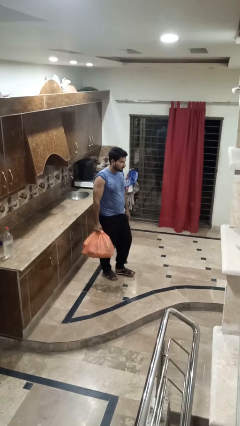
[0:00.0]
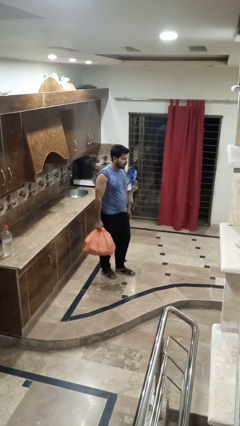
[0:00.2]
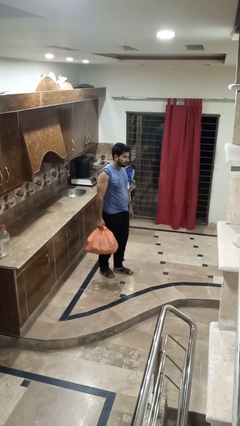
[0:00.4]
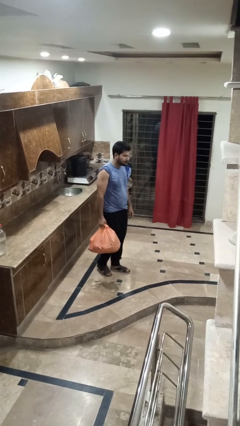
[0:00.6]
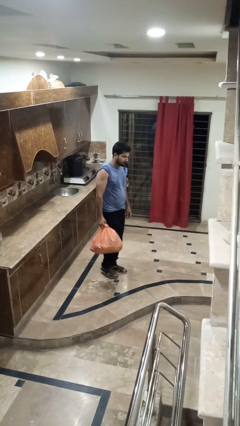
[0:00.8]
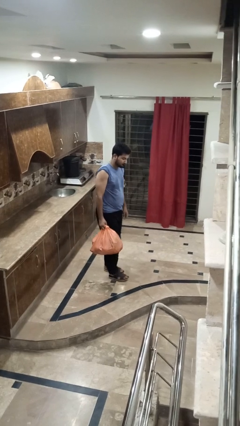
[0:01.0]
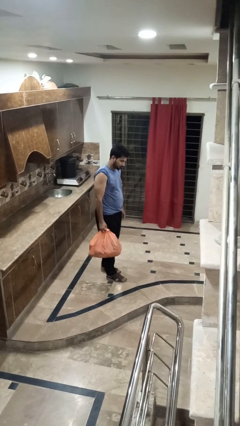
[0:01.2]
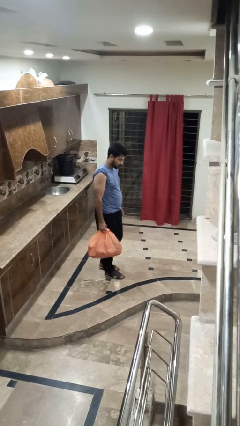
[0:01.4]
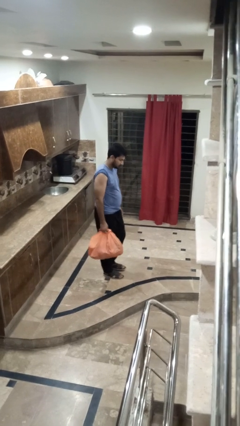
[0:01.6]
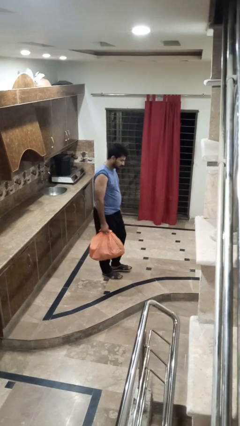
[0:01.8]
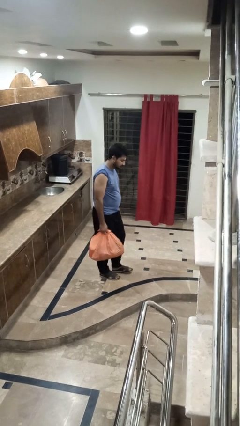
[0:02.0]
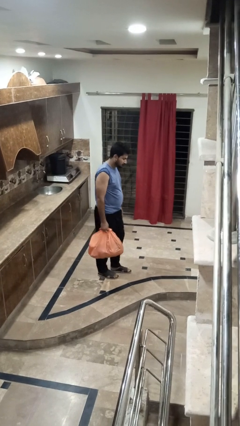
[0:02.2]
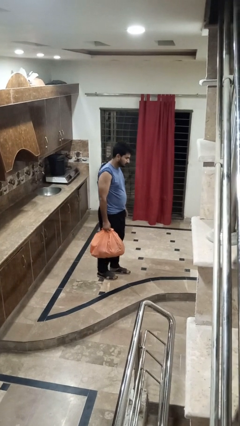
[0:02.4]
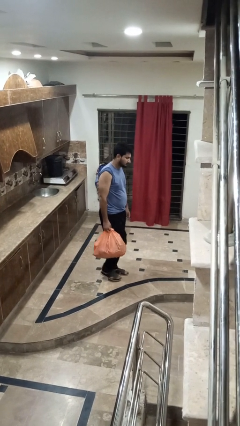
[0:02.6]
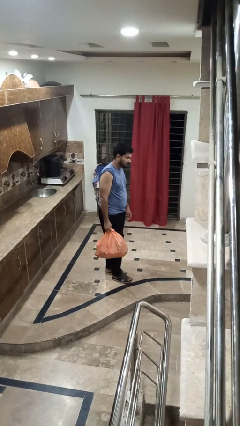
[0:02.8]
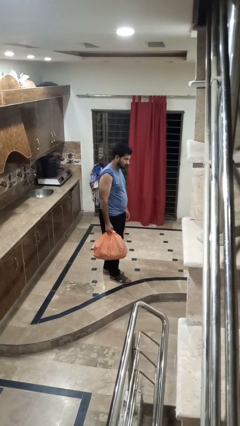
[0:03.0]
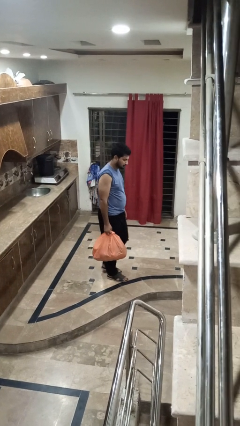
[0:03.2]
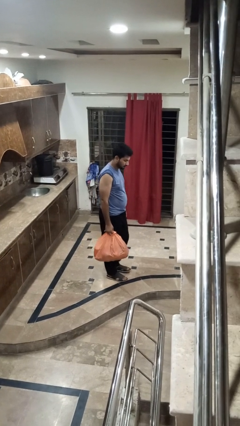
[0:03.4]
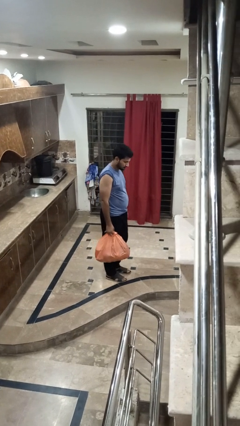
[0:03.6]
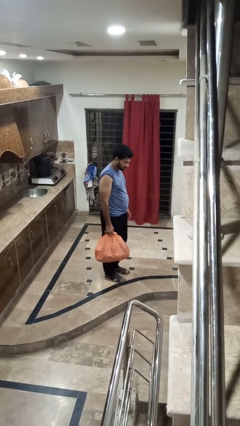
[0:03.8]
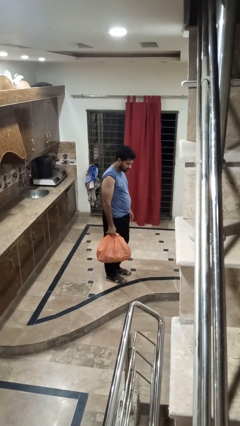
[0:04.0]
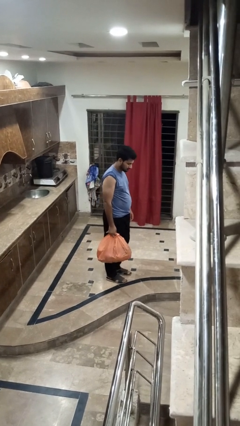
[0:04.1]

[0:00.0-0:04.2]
person carries groceries

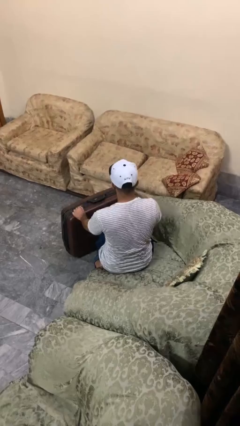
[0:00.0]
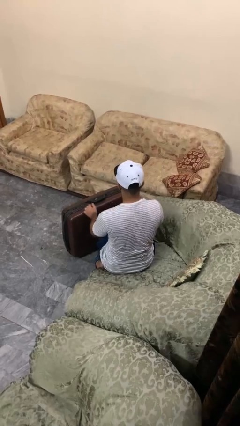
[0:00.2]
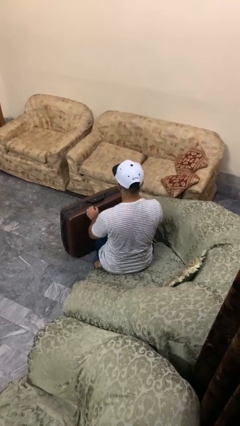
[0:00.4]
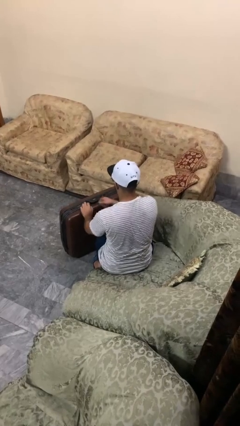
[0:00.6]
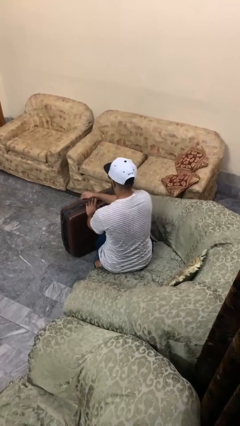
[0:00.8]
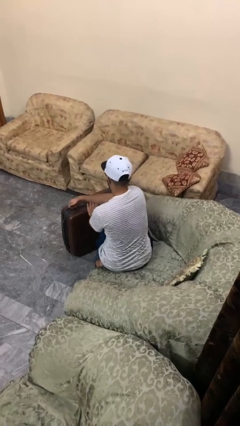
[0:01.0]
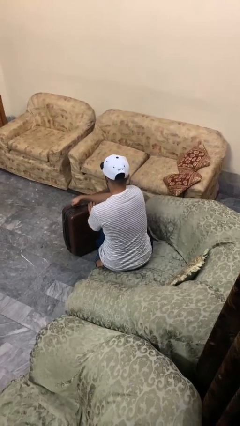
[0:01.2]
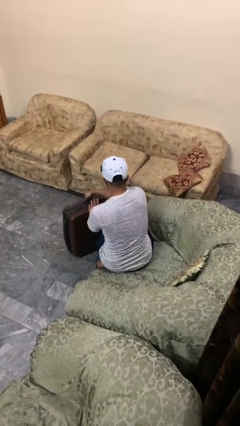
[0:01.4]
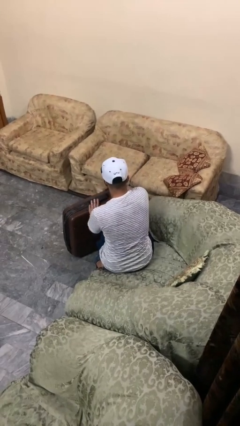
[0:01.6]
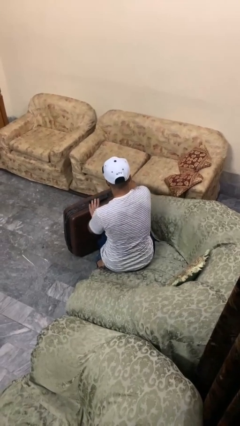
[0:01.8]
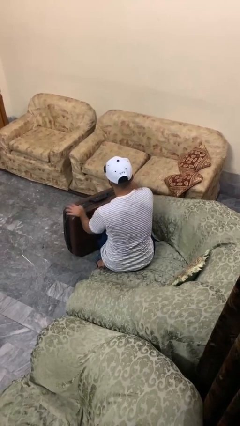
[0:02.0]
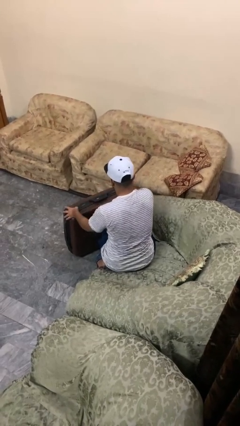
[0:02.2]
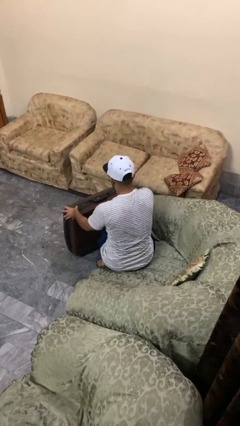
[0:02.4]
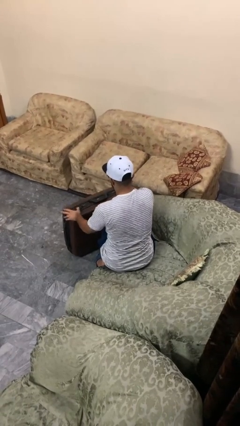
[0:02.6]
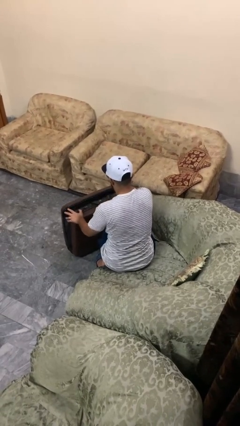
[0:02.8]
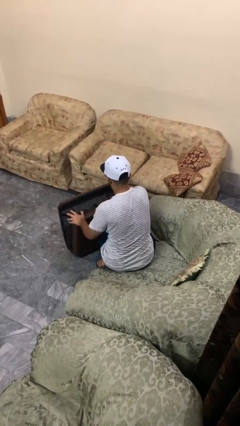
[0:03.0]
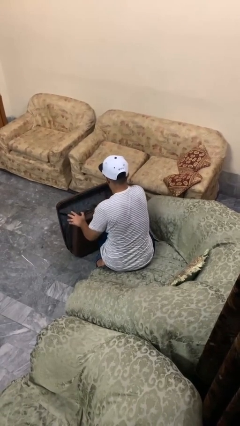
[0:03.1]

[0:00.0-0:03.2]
person opens suitcase

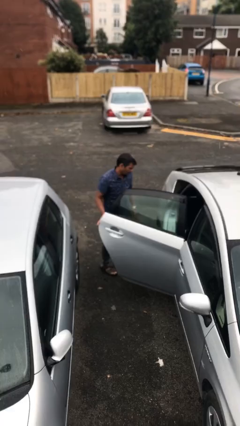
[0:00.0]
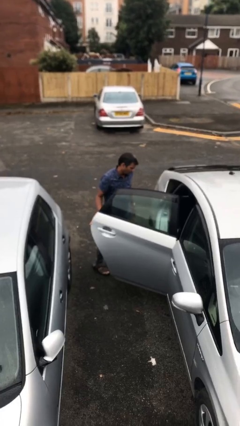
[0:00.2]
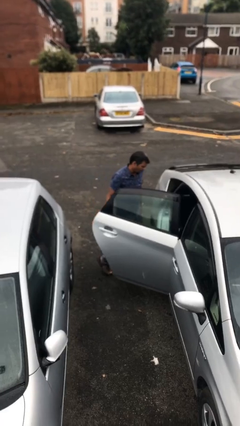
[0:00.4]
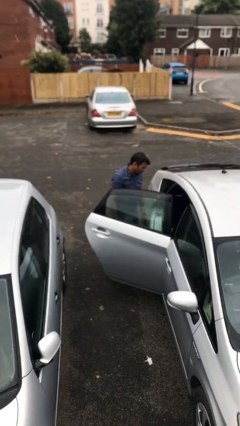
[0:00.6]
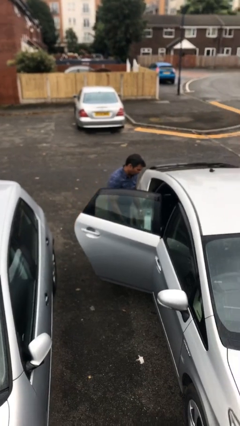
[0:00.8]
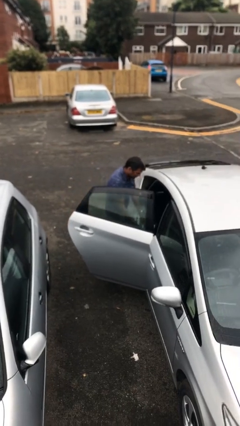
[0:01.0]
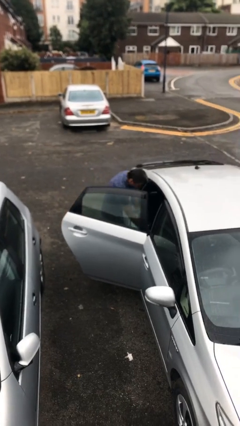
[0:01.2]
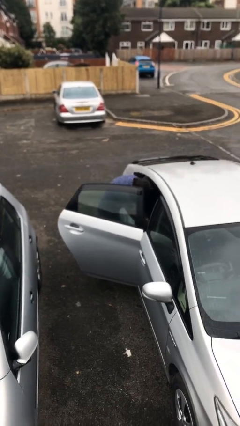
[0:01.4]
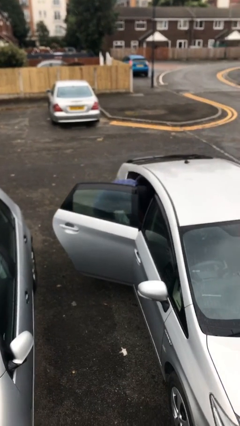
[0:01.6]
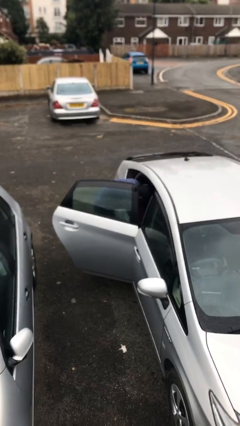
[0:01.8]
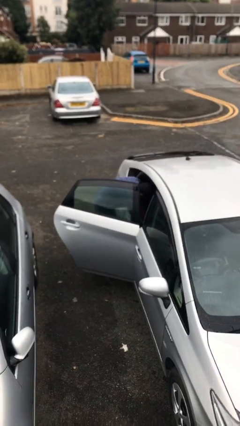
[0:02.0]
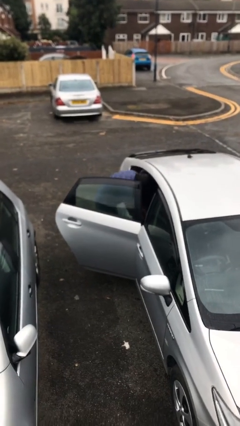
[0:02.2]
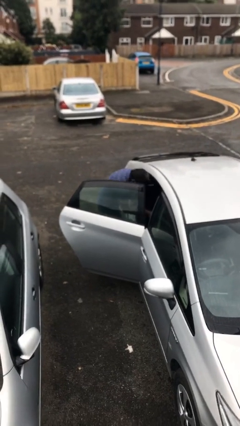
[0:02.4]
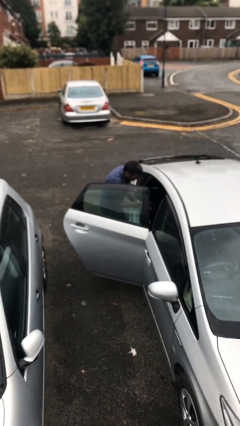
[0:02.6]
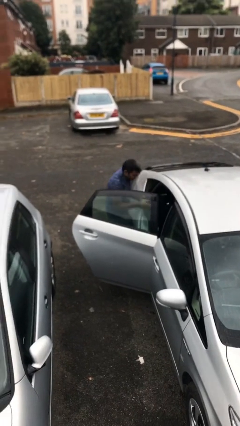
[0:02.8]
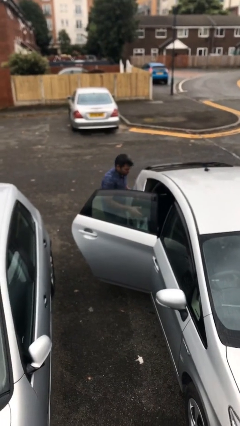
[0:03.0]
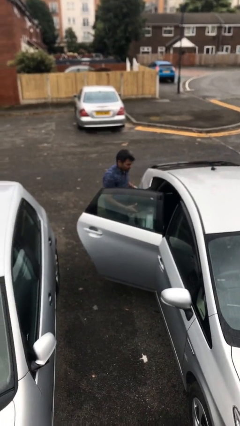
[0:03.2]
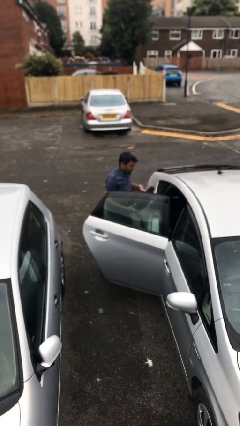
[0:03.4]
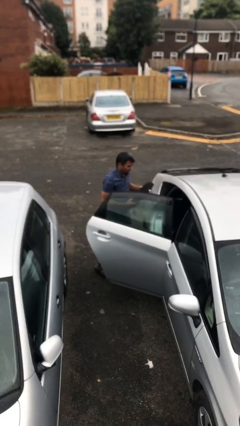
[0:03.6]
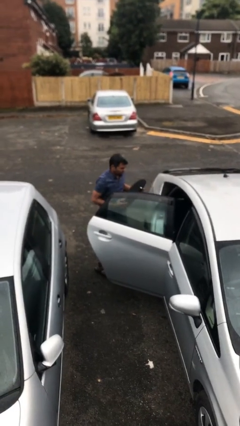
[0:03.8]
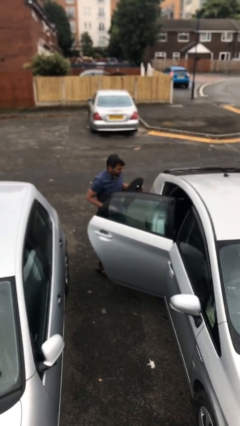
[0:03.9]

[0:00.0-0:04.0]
person unloads car

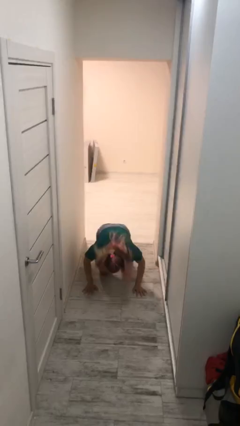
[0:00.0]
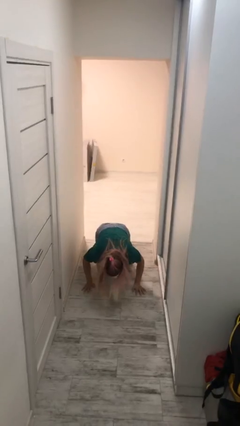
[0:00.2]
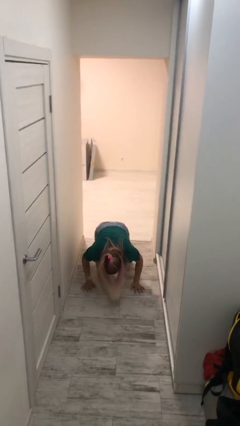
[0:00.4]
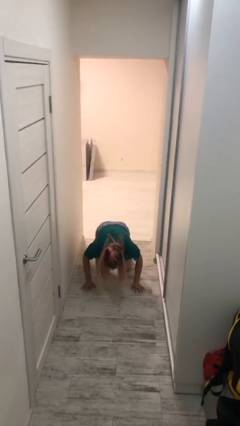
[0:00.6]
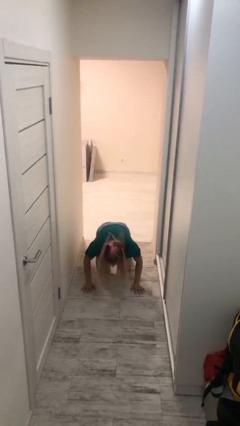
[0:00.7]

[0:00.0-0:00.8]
person trips on object on floor

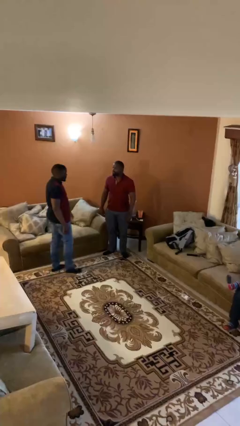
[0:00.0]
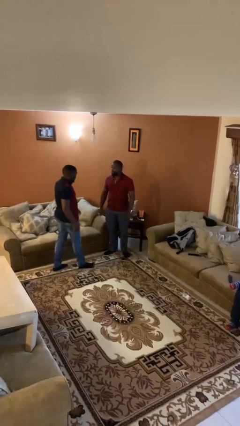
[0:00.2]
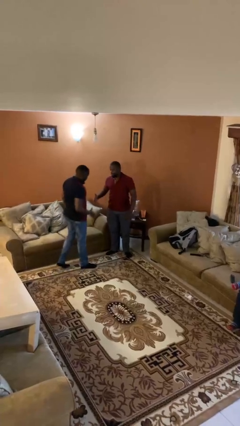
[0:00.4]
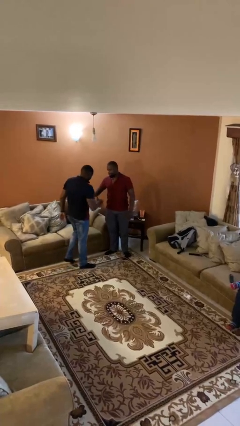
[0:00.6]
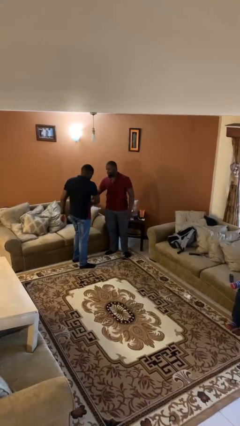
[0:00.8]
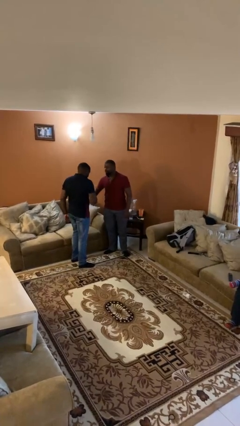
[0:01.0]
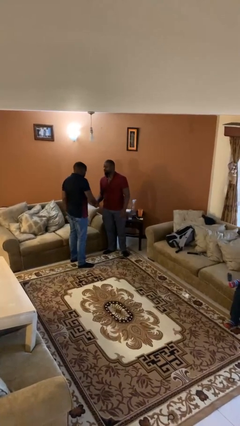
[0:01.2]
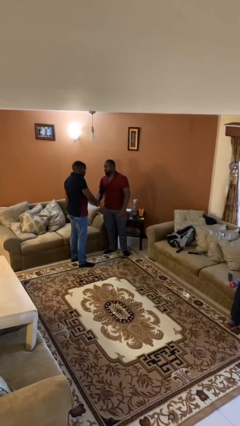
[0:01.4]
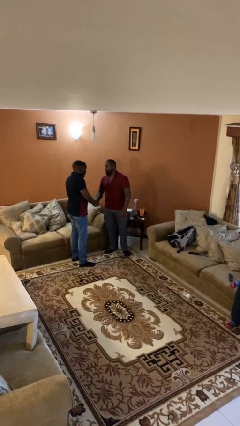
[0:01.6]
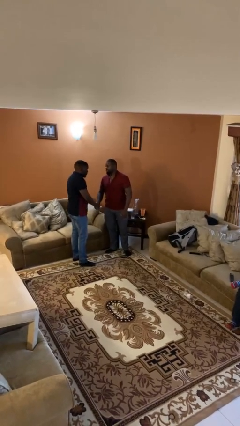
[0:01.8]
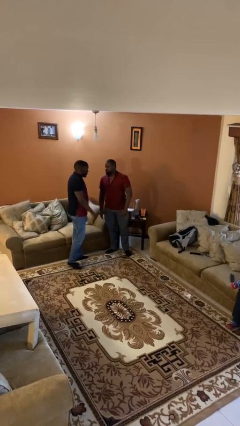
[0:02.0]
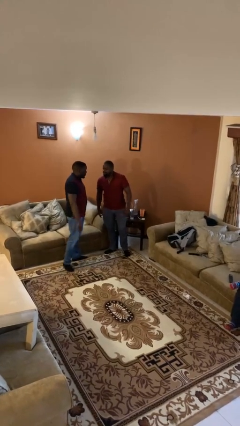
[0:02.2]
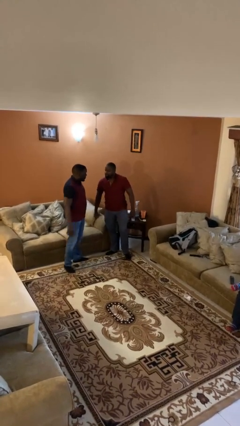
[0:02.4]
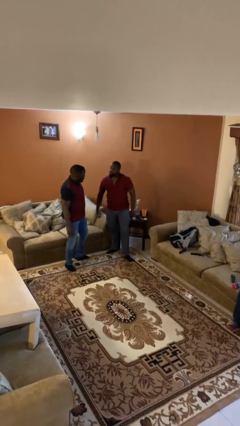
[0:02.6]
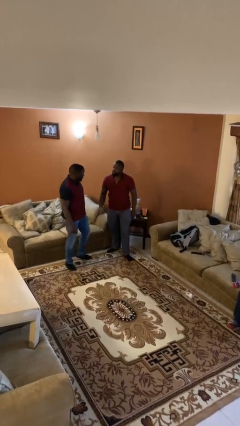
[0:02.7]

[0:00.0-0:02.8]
person shakes hand

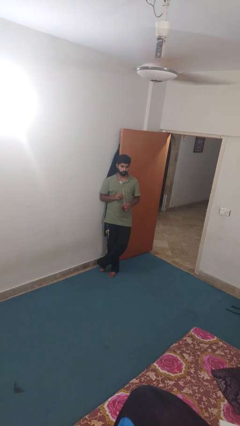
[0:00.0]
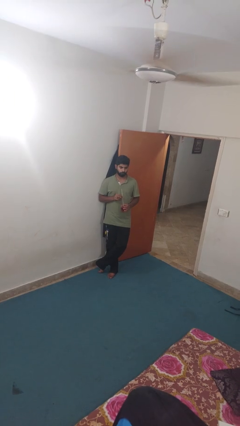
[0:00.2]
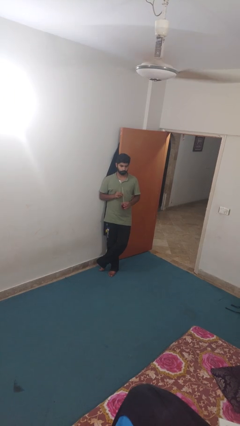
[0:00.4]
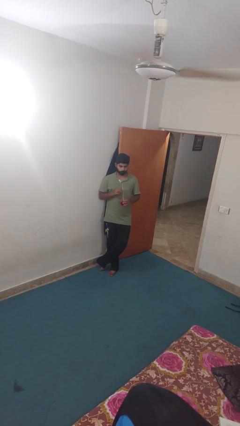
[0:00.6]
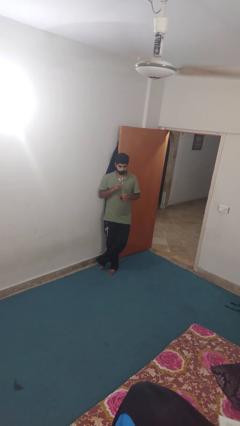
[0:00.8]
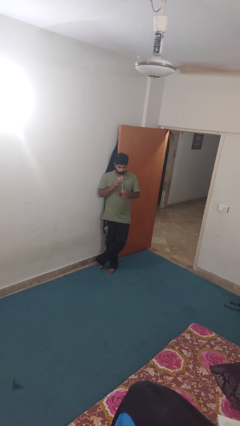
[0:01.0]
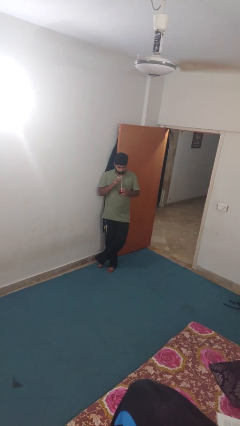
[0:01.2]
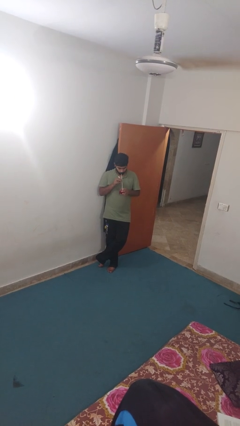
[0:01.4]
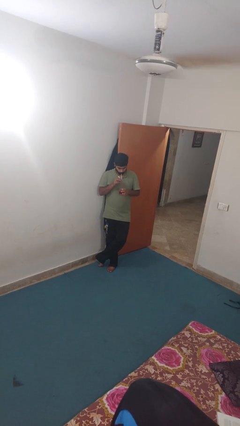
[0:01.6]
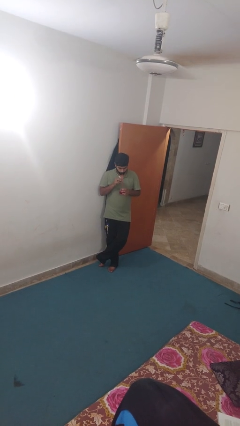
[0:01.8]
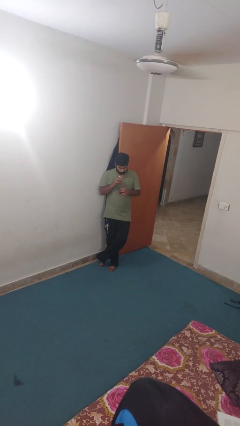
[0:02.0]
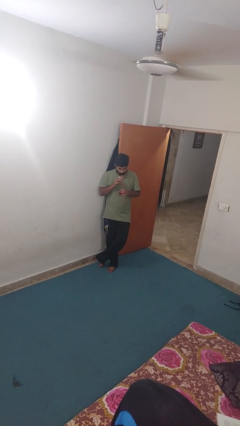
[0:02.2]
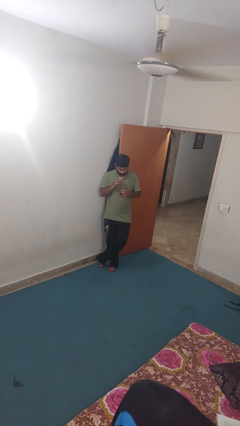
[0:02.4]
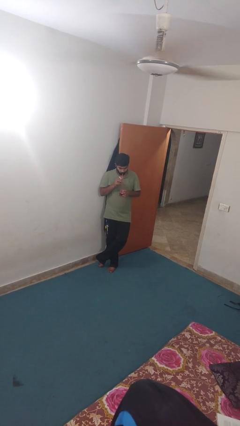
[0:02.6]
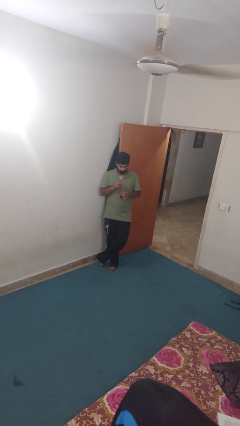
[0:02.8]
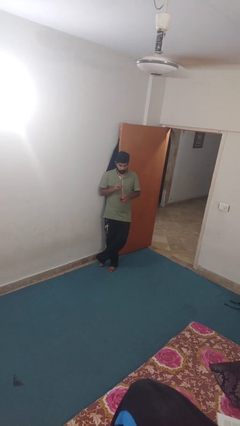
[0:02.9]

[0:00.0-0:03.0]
person drinks from straw
